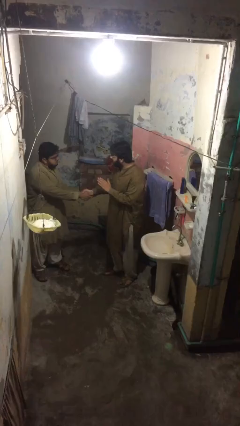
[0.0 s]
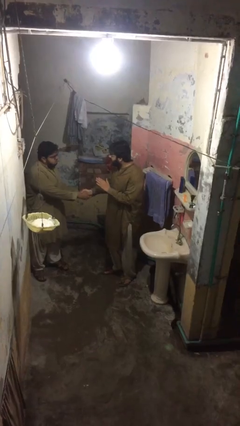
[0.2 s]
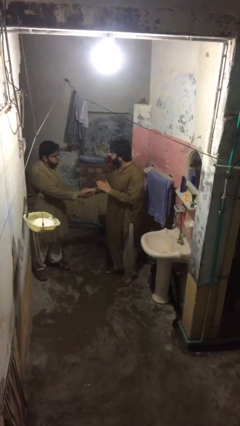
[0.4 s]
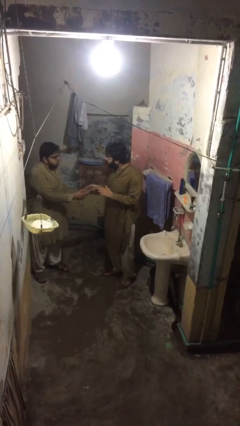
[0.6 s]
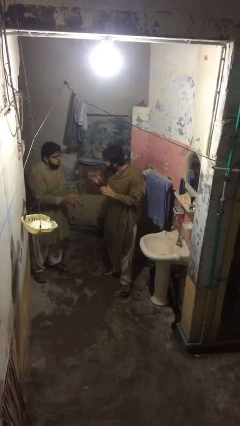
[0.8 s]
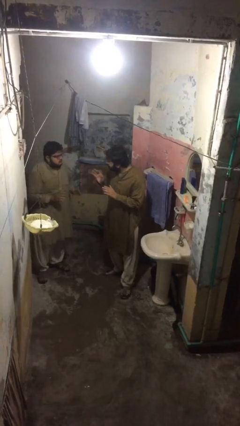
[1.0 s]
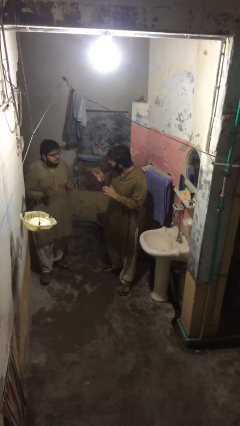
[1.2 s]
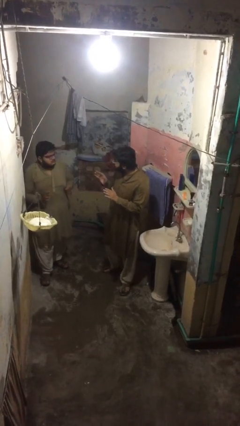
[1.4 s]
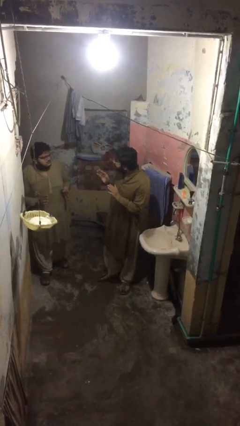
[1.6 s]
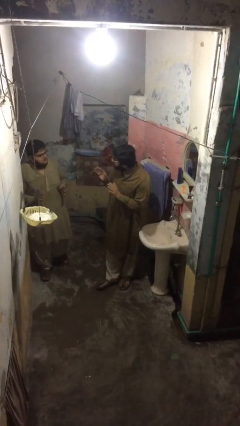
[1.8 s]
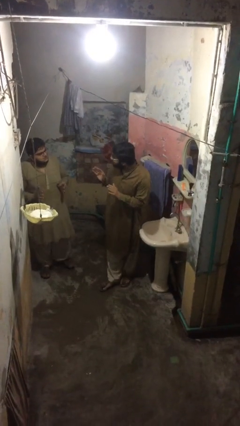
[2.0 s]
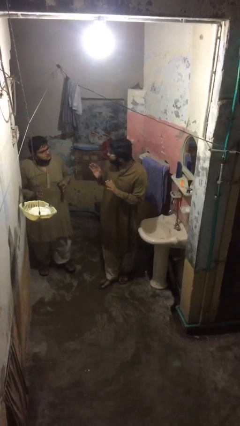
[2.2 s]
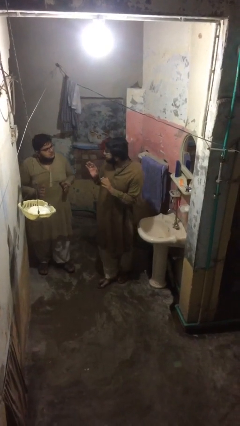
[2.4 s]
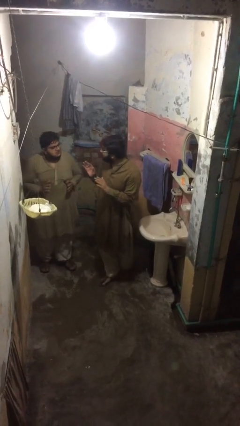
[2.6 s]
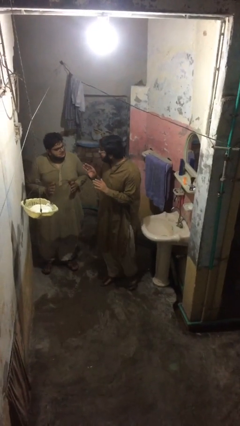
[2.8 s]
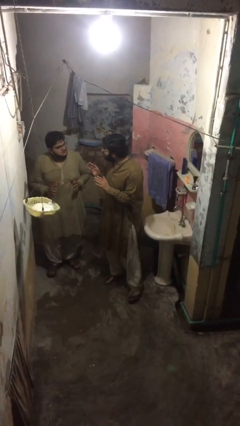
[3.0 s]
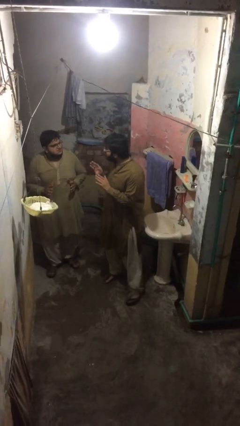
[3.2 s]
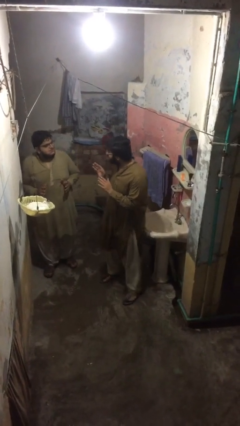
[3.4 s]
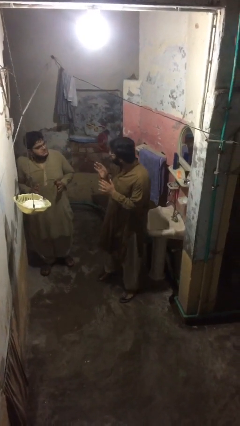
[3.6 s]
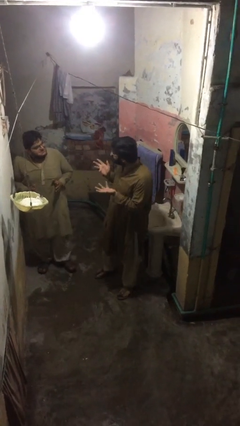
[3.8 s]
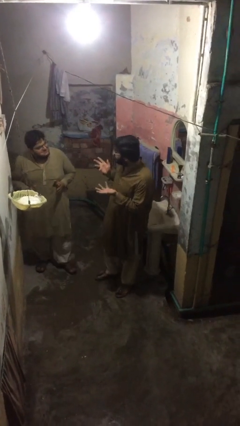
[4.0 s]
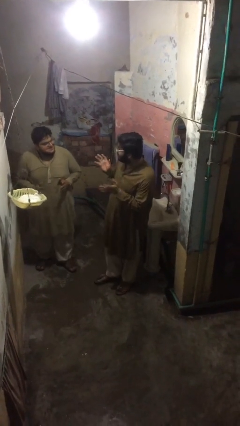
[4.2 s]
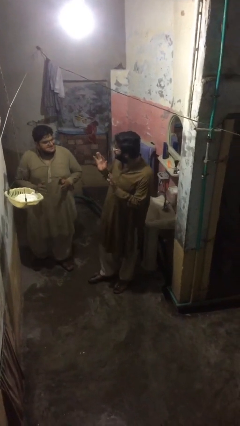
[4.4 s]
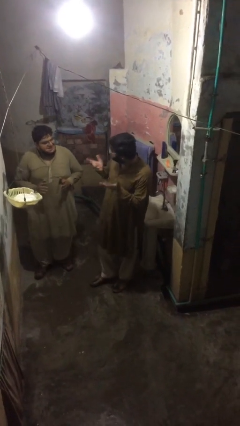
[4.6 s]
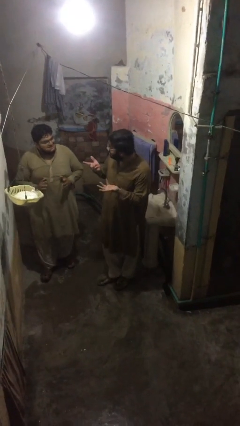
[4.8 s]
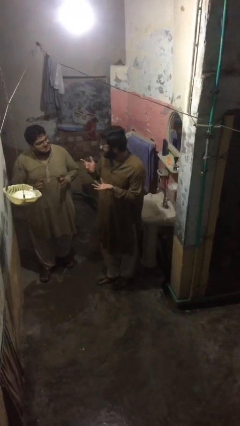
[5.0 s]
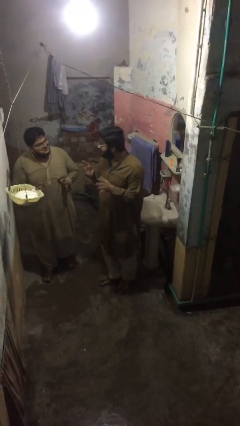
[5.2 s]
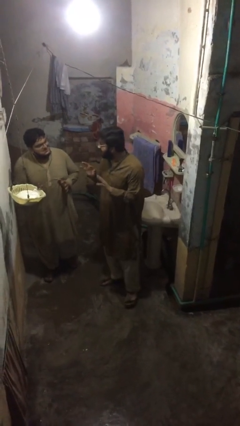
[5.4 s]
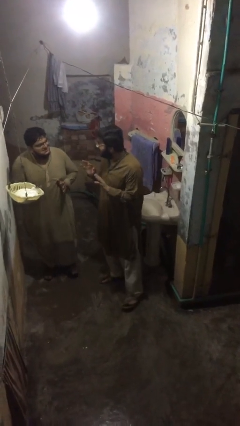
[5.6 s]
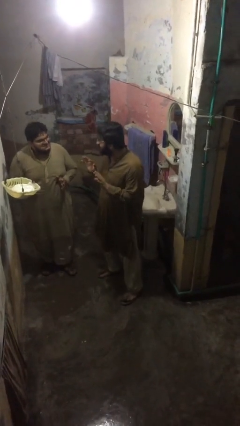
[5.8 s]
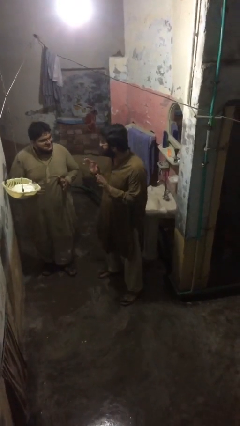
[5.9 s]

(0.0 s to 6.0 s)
person talks to person

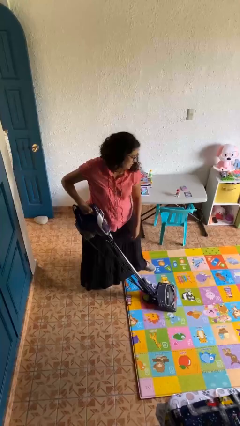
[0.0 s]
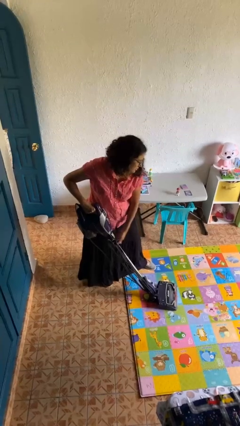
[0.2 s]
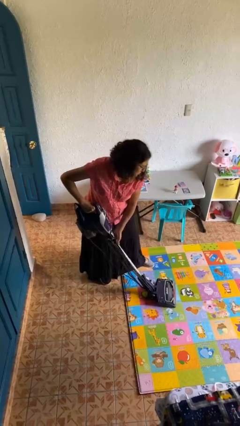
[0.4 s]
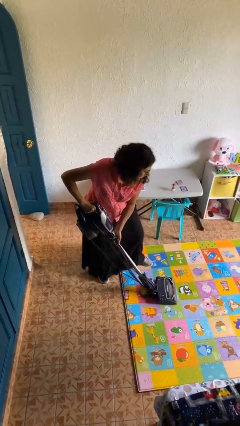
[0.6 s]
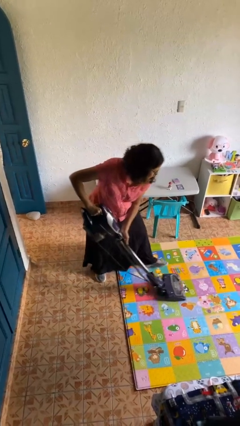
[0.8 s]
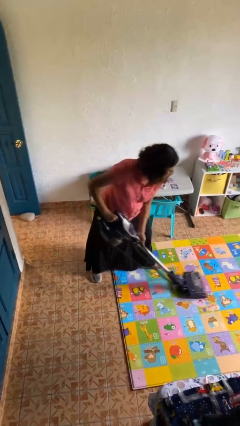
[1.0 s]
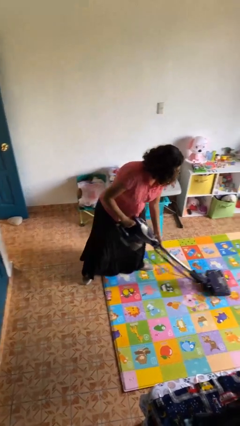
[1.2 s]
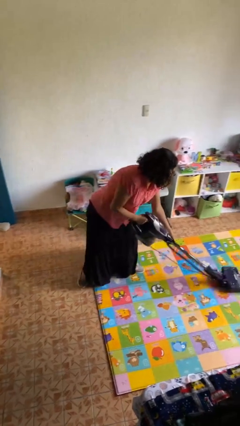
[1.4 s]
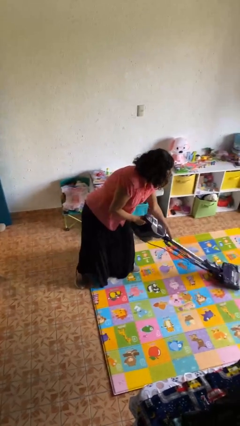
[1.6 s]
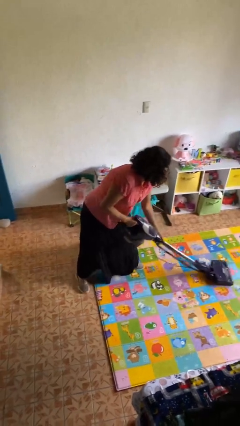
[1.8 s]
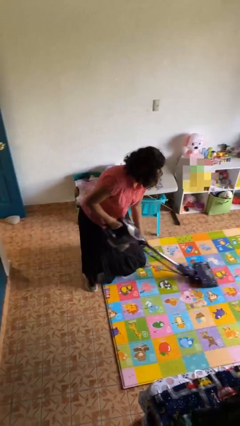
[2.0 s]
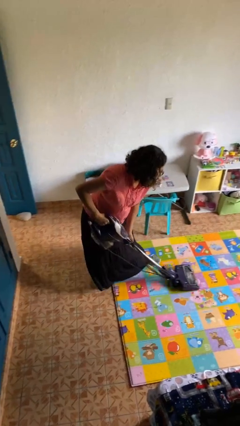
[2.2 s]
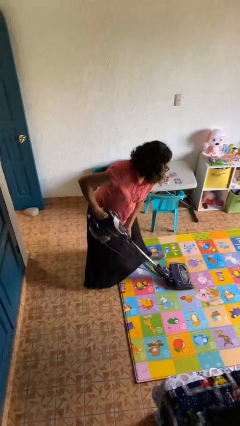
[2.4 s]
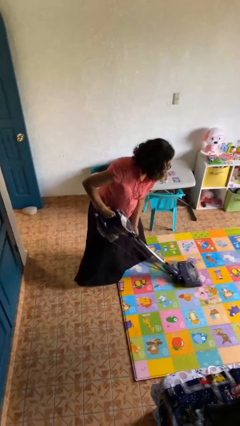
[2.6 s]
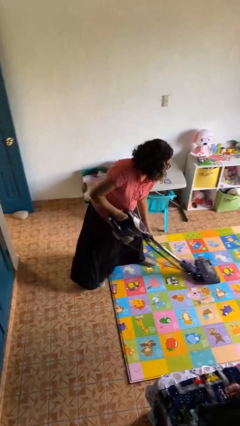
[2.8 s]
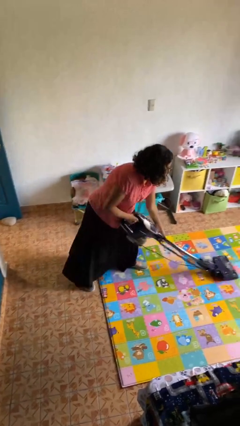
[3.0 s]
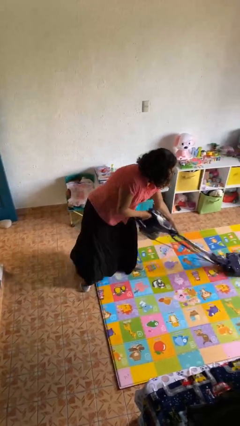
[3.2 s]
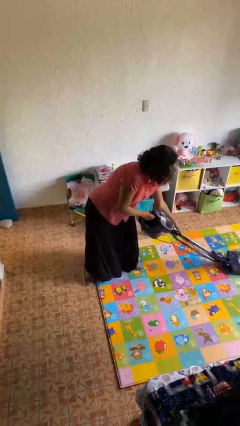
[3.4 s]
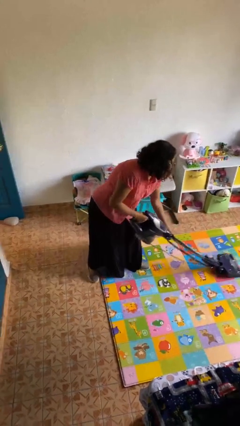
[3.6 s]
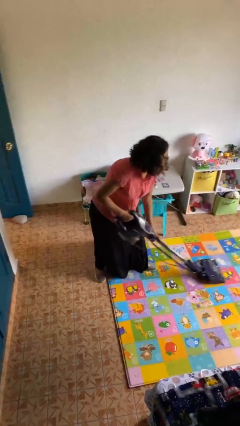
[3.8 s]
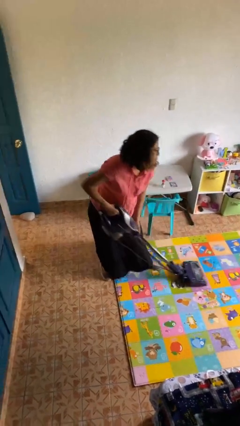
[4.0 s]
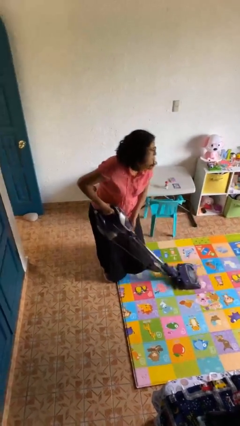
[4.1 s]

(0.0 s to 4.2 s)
person vacuums carpet

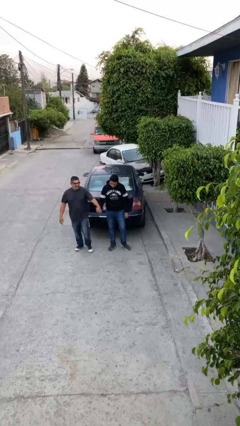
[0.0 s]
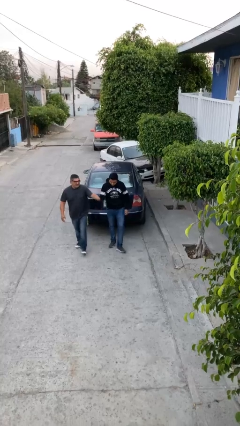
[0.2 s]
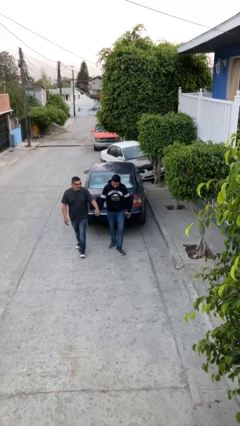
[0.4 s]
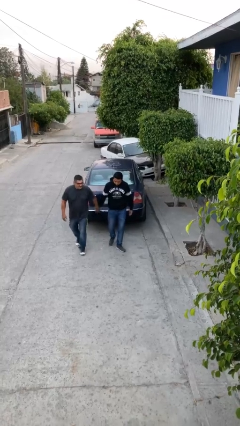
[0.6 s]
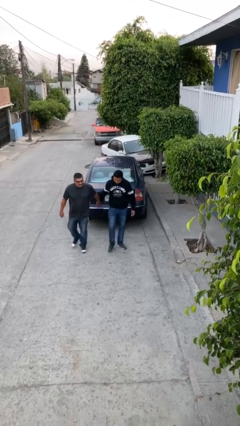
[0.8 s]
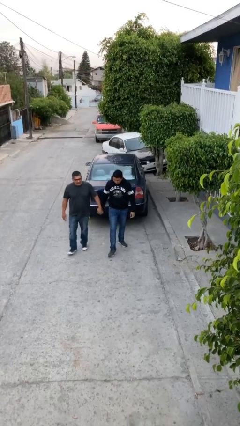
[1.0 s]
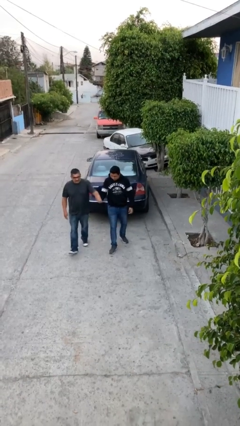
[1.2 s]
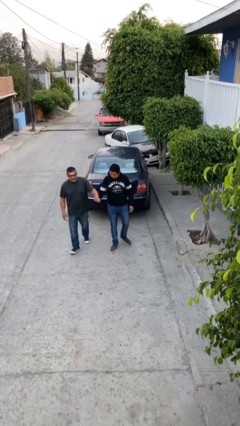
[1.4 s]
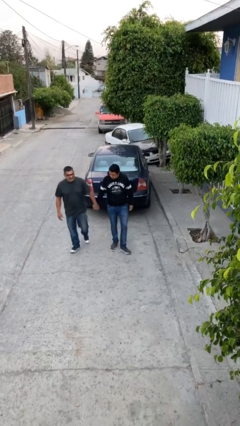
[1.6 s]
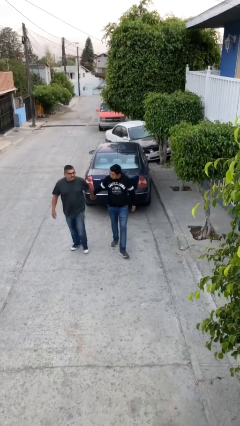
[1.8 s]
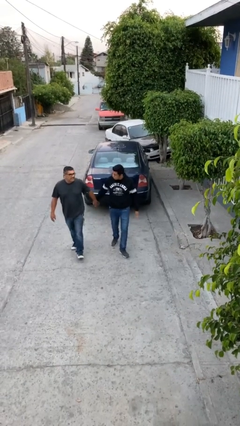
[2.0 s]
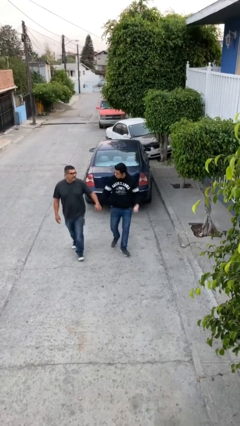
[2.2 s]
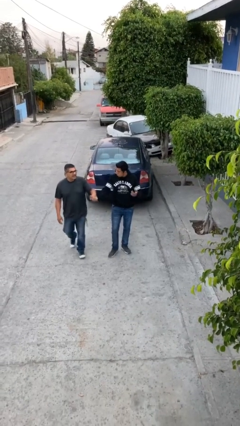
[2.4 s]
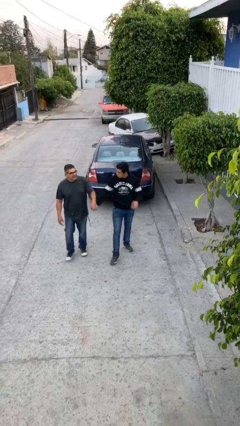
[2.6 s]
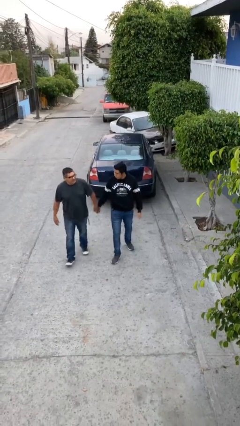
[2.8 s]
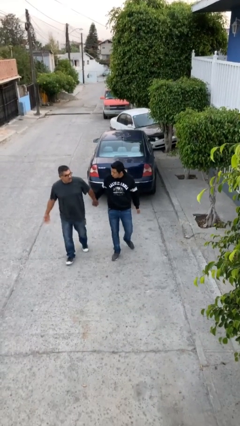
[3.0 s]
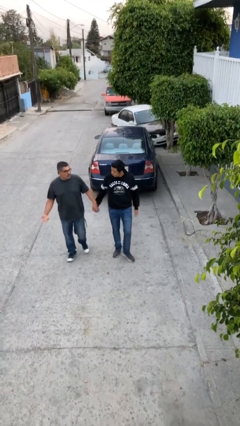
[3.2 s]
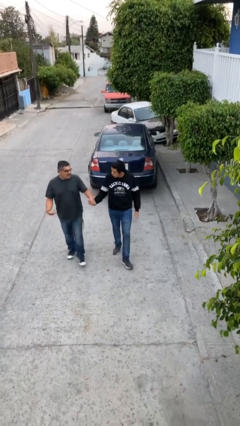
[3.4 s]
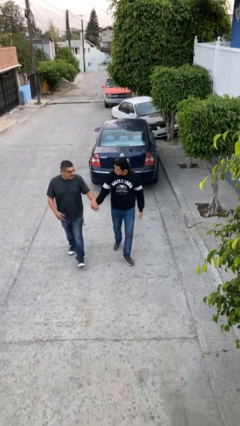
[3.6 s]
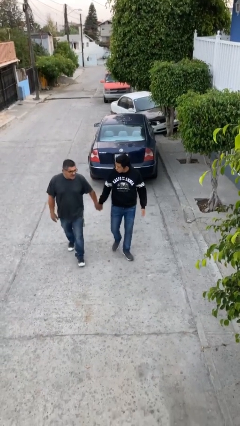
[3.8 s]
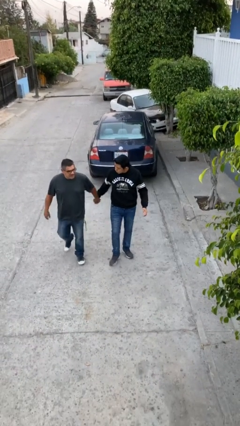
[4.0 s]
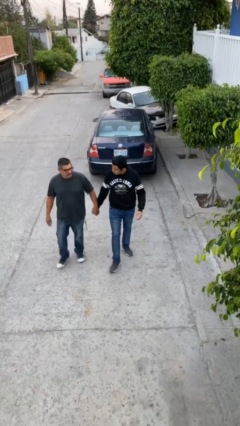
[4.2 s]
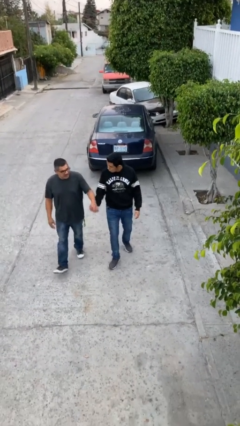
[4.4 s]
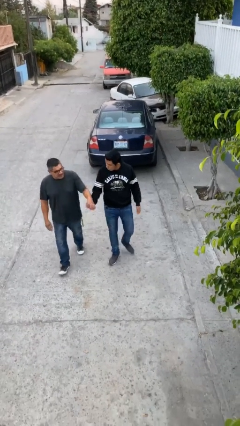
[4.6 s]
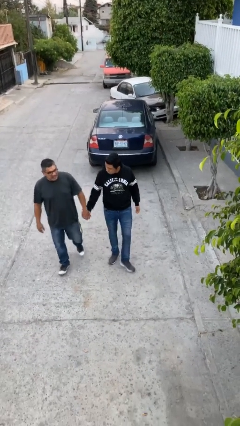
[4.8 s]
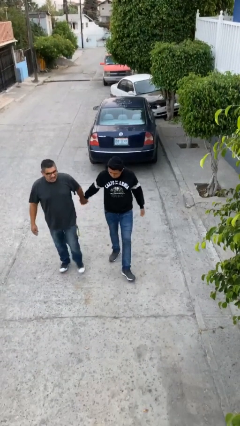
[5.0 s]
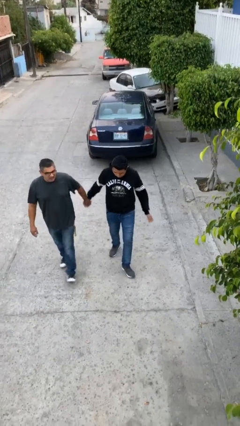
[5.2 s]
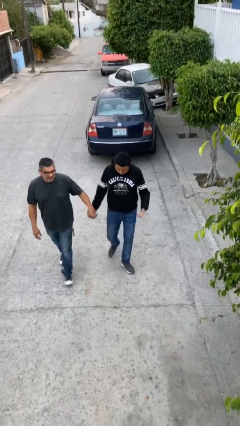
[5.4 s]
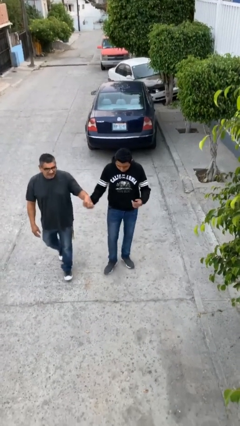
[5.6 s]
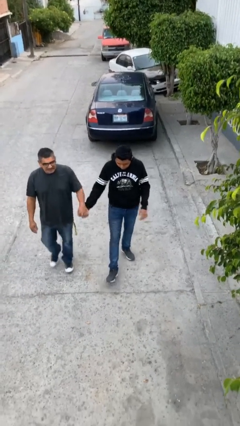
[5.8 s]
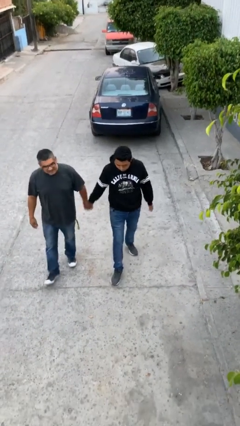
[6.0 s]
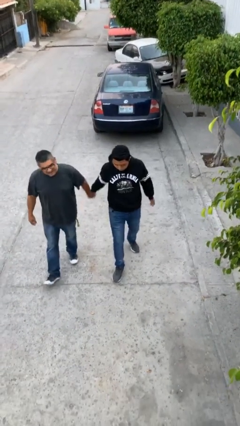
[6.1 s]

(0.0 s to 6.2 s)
person holds hand

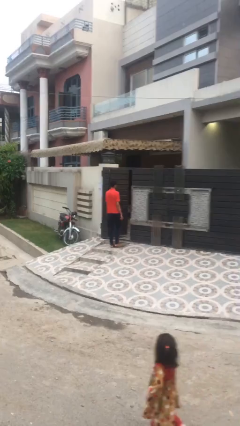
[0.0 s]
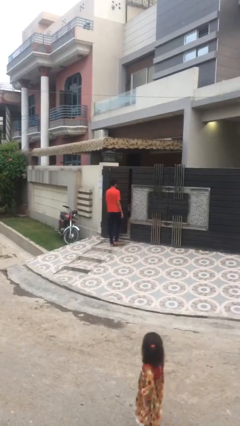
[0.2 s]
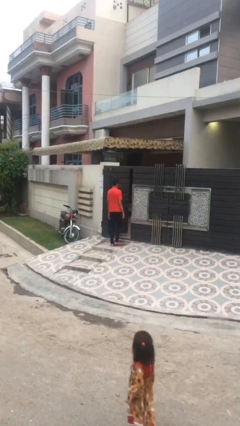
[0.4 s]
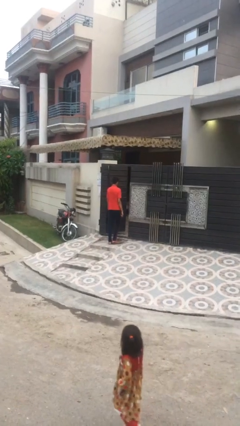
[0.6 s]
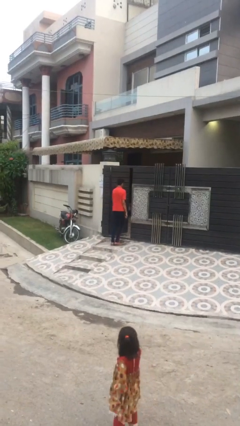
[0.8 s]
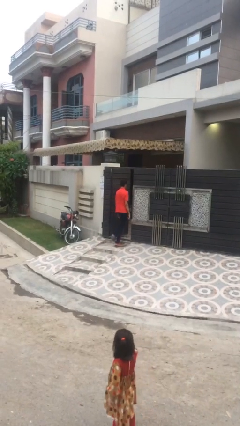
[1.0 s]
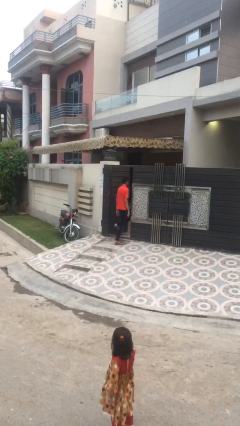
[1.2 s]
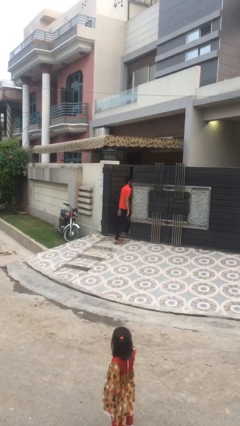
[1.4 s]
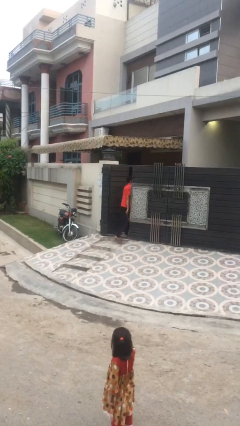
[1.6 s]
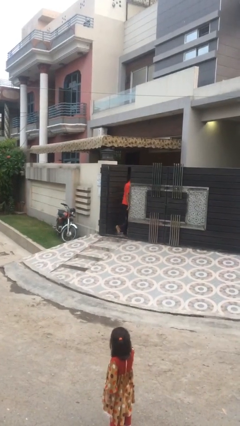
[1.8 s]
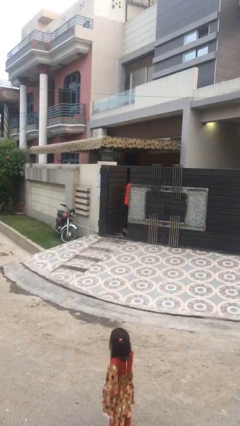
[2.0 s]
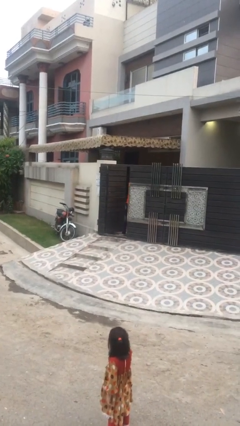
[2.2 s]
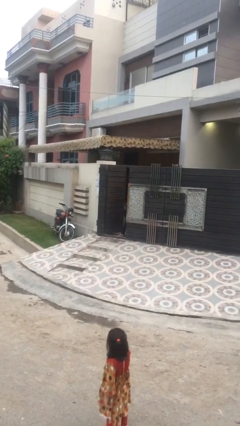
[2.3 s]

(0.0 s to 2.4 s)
person exits scene through structure
